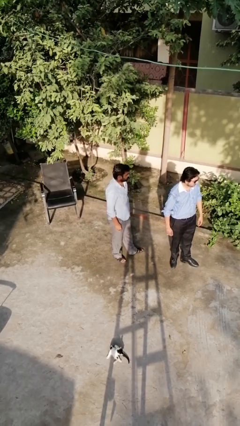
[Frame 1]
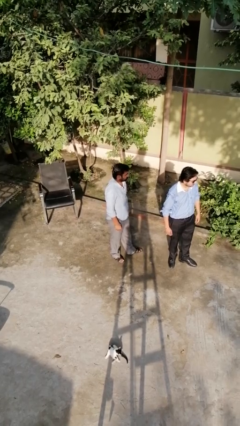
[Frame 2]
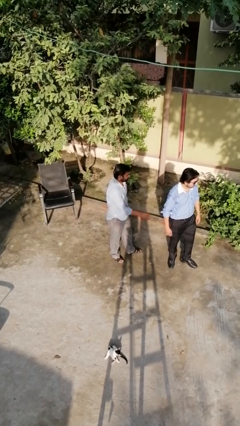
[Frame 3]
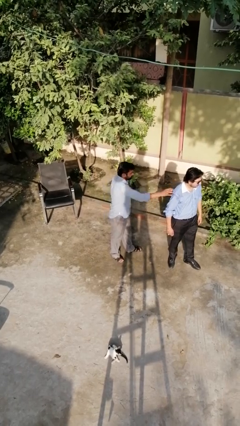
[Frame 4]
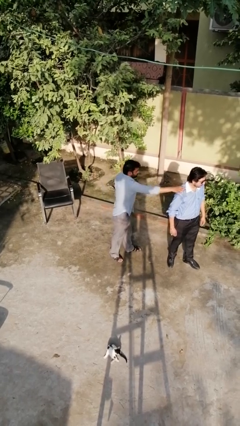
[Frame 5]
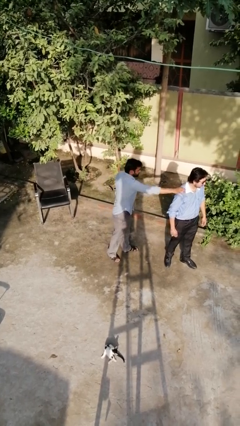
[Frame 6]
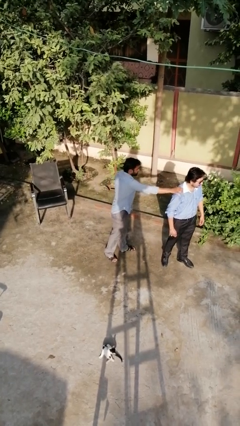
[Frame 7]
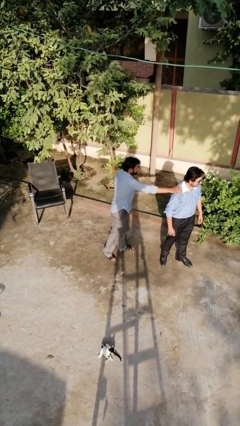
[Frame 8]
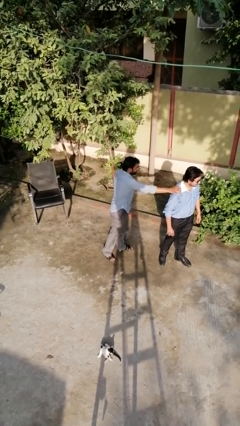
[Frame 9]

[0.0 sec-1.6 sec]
person grabs person by shoulder

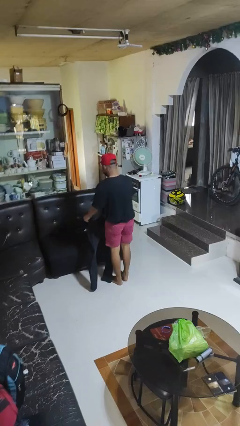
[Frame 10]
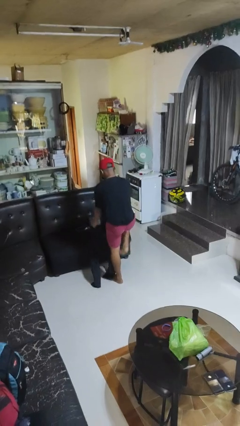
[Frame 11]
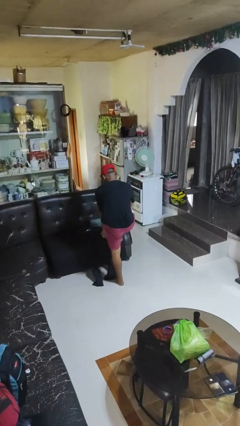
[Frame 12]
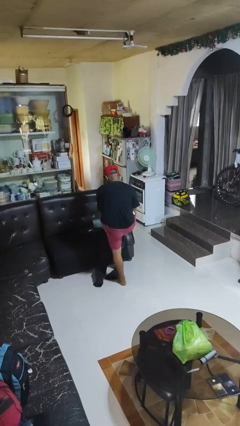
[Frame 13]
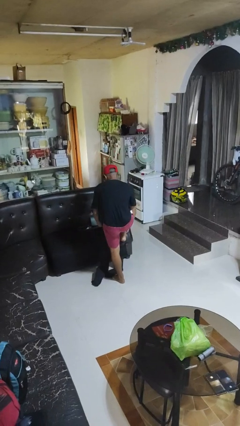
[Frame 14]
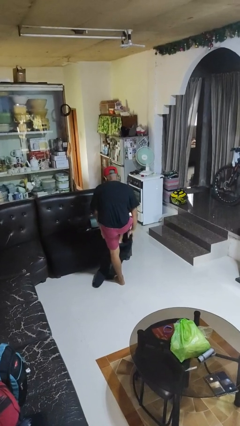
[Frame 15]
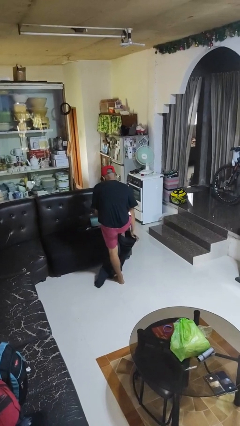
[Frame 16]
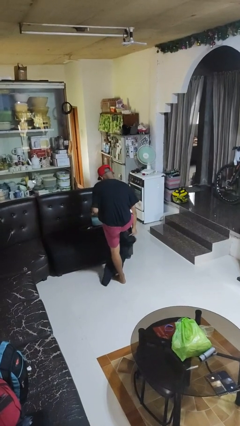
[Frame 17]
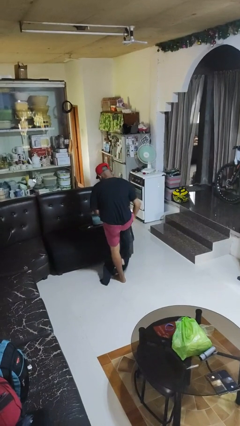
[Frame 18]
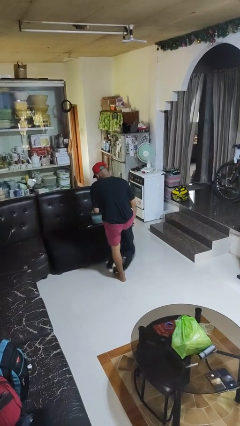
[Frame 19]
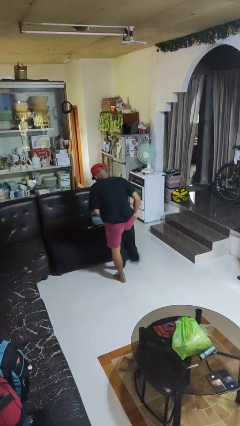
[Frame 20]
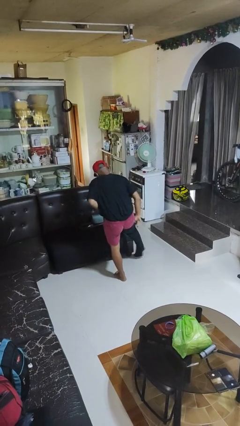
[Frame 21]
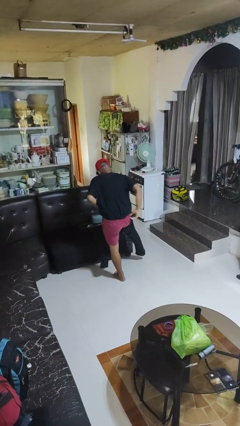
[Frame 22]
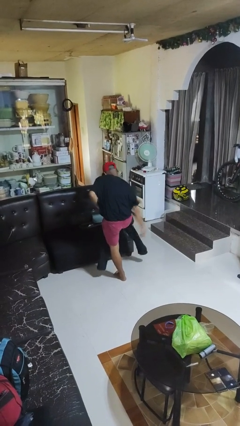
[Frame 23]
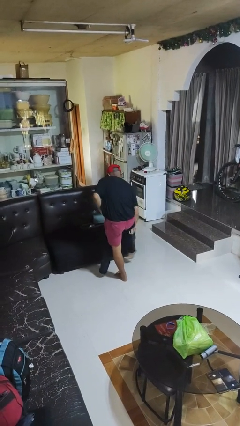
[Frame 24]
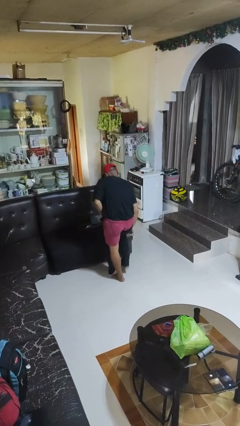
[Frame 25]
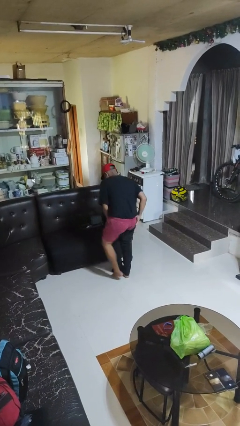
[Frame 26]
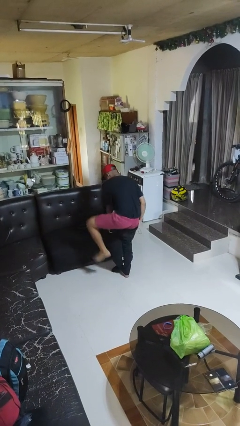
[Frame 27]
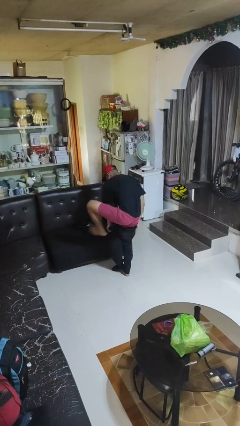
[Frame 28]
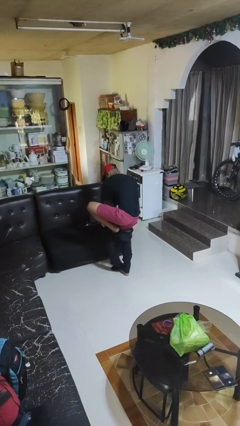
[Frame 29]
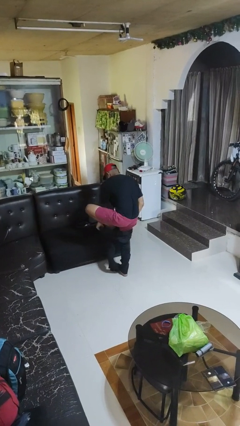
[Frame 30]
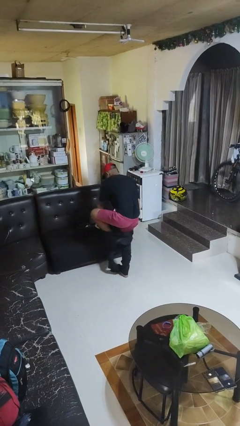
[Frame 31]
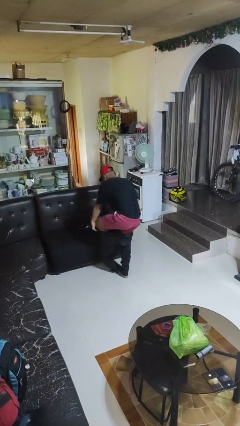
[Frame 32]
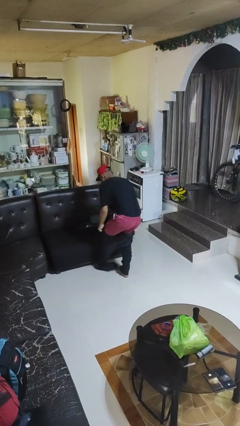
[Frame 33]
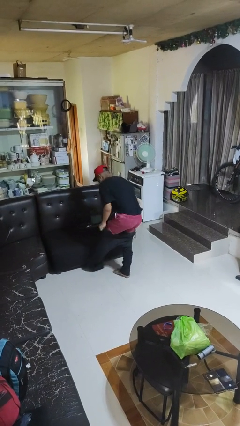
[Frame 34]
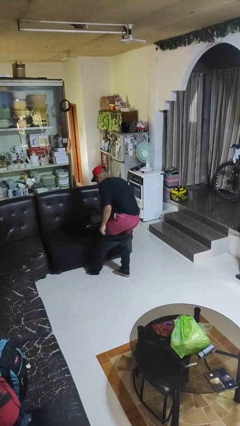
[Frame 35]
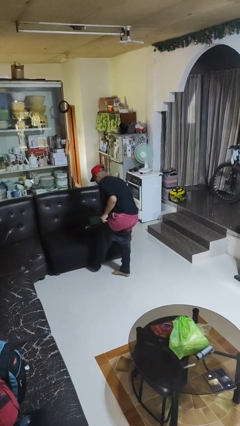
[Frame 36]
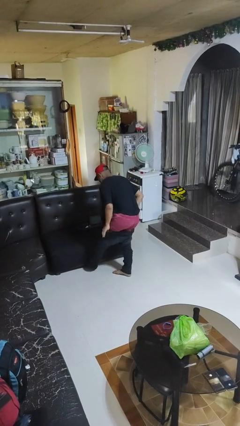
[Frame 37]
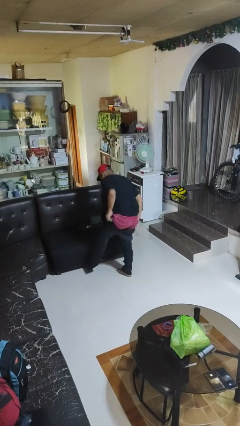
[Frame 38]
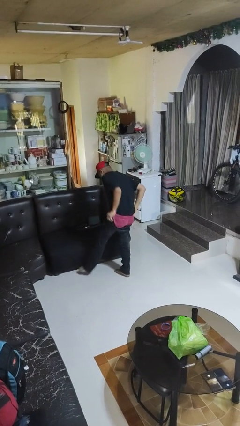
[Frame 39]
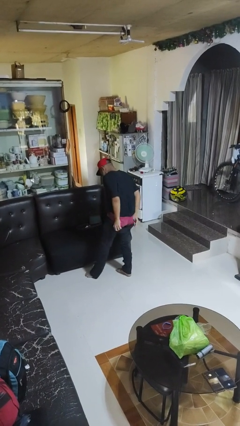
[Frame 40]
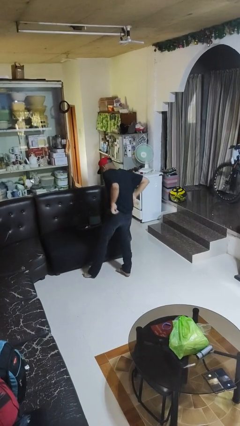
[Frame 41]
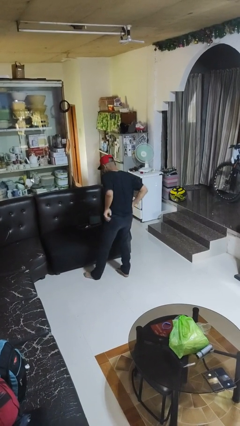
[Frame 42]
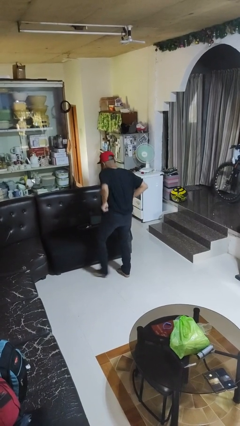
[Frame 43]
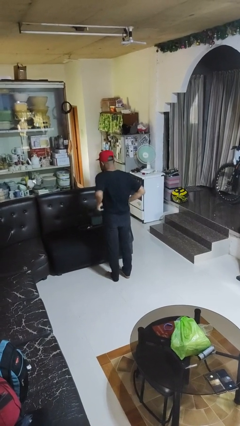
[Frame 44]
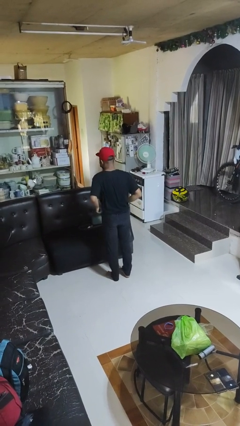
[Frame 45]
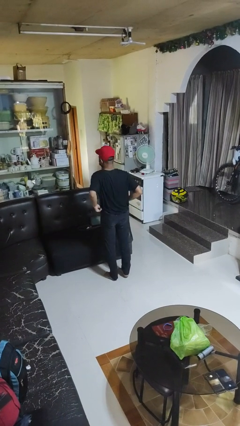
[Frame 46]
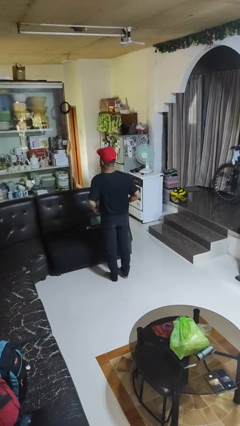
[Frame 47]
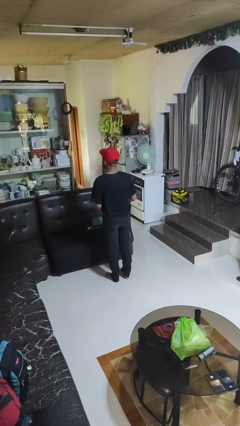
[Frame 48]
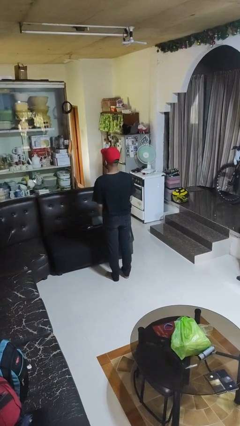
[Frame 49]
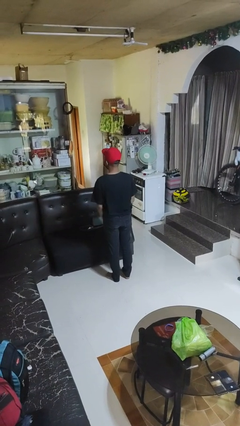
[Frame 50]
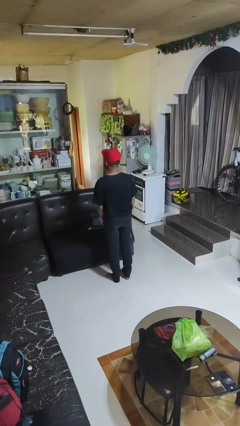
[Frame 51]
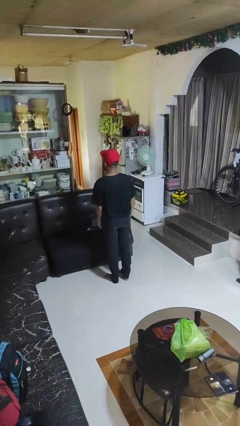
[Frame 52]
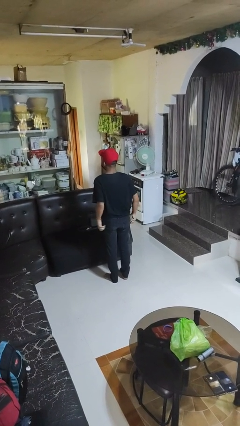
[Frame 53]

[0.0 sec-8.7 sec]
person puts on pants

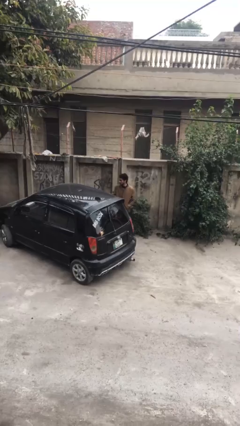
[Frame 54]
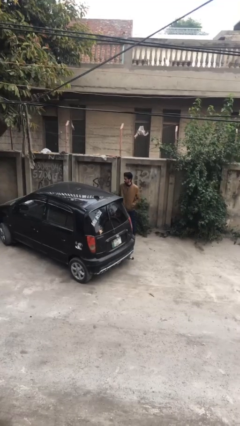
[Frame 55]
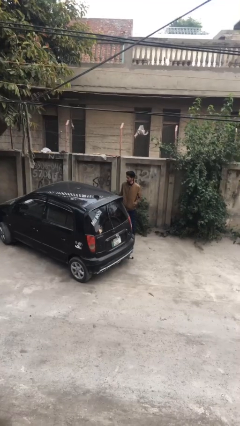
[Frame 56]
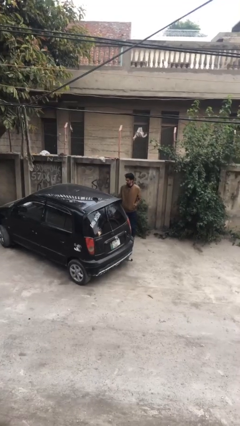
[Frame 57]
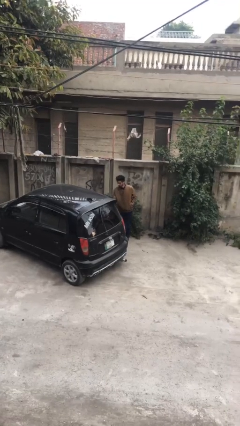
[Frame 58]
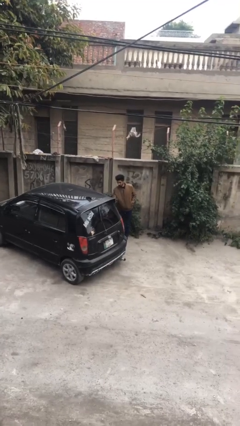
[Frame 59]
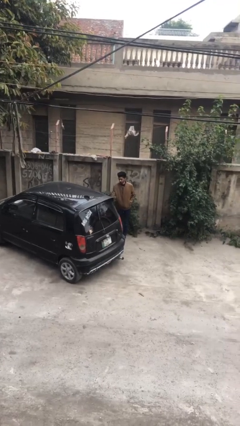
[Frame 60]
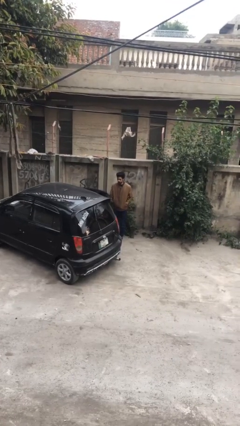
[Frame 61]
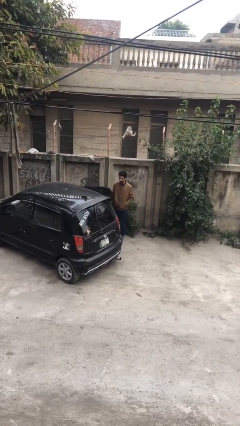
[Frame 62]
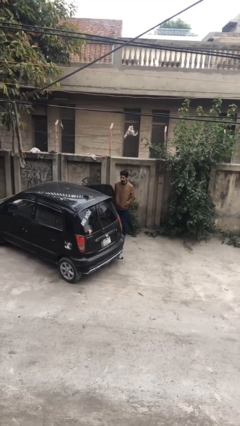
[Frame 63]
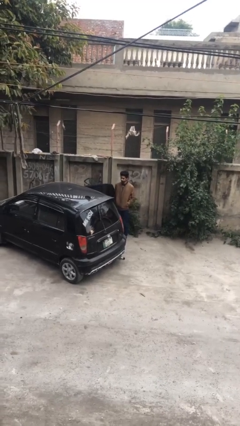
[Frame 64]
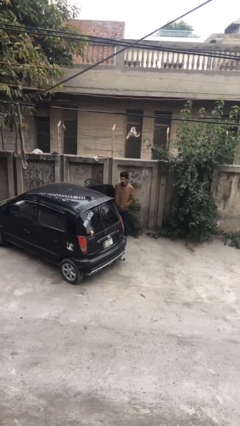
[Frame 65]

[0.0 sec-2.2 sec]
person opens car door

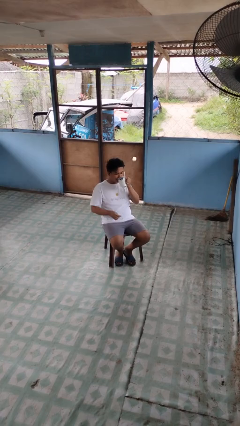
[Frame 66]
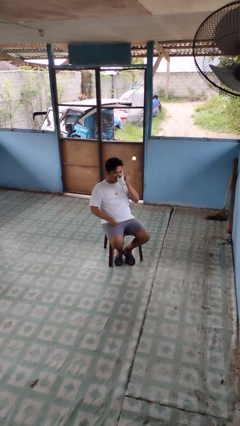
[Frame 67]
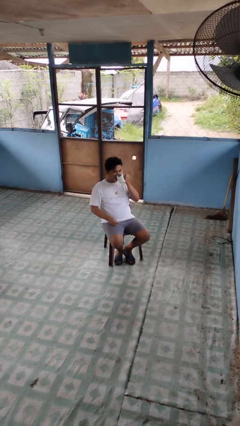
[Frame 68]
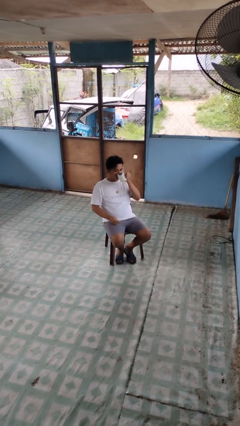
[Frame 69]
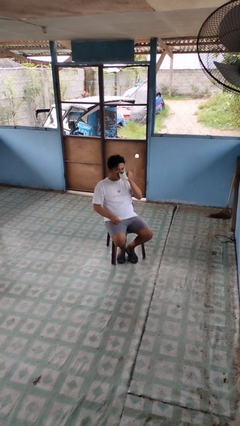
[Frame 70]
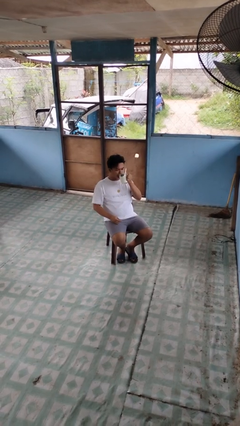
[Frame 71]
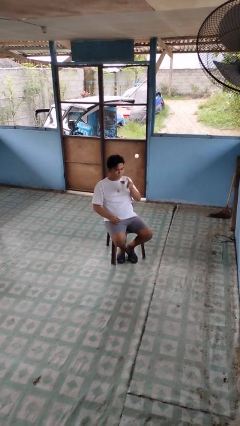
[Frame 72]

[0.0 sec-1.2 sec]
person drinks from mug

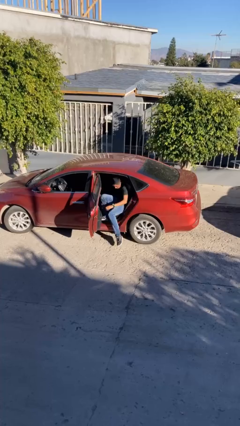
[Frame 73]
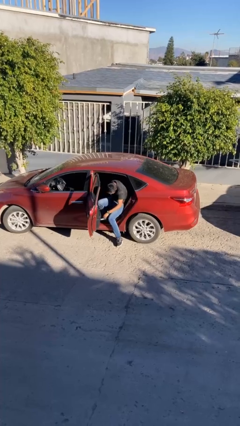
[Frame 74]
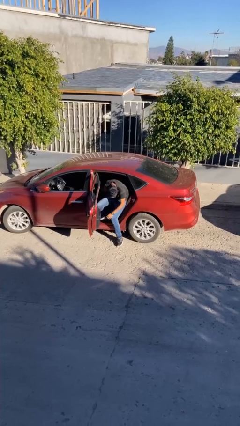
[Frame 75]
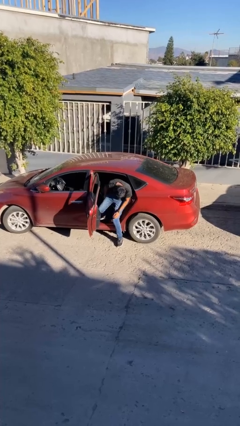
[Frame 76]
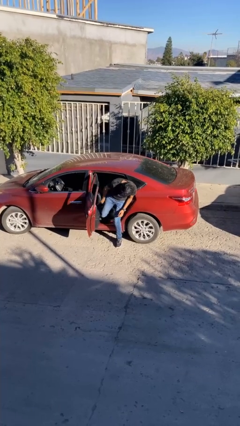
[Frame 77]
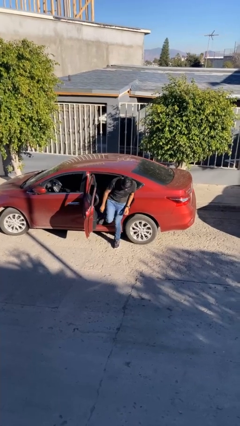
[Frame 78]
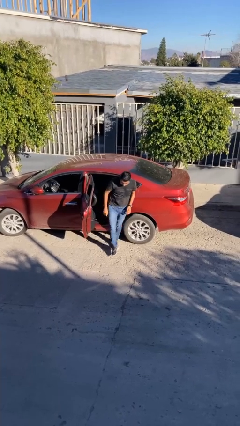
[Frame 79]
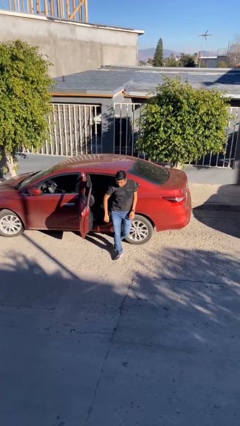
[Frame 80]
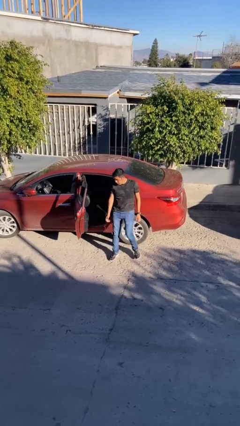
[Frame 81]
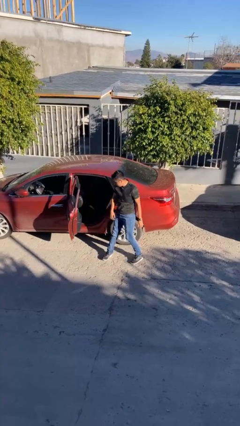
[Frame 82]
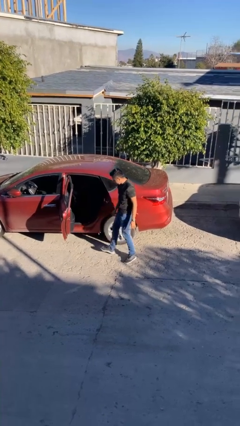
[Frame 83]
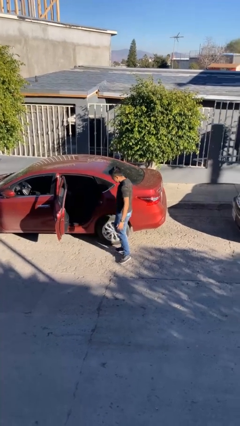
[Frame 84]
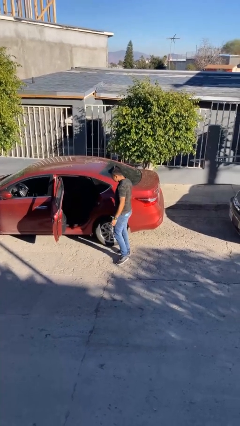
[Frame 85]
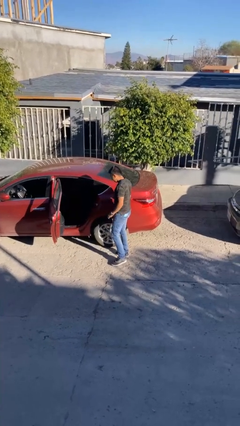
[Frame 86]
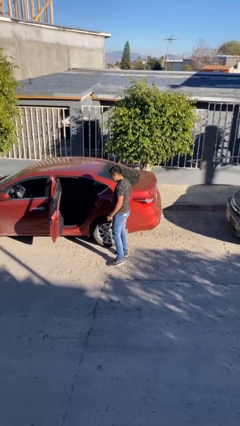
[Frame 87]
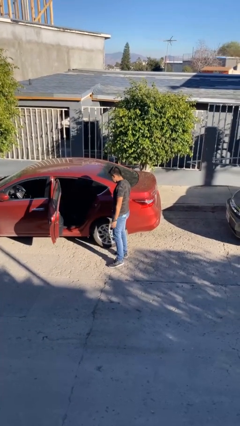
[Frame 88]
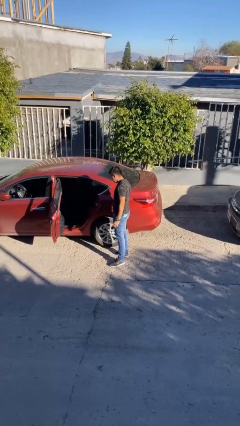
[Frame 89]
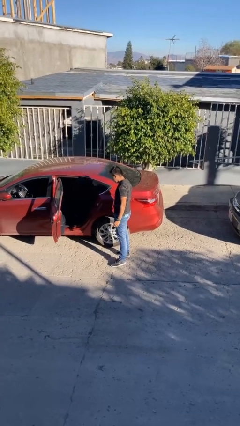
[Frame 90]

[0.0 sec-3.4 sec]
person exits car

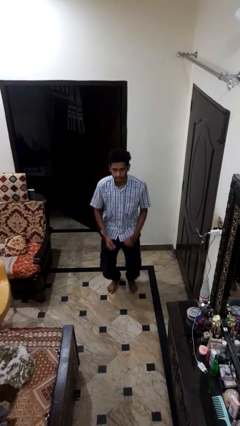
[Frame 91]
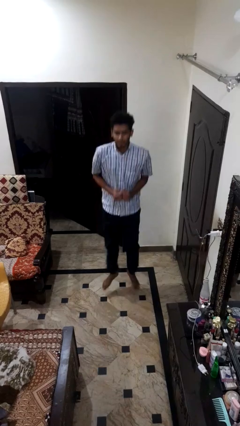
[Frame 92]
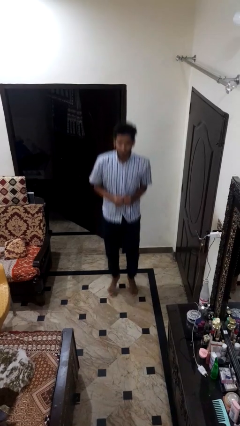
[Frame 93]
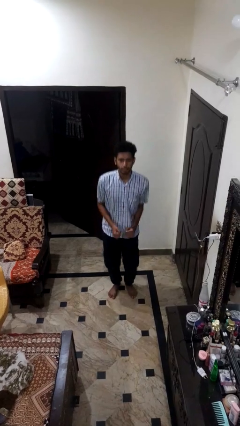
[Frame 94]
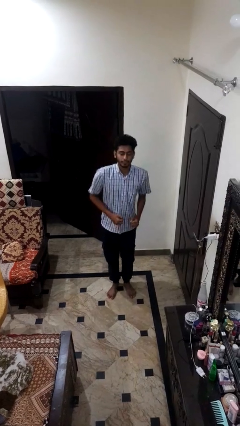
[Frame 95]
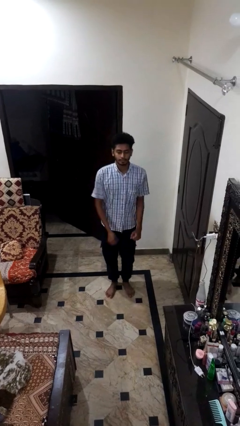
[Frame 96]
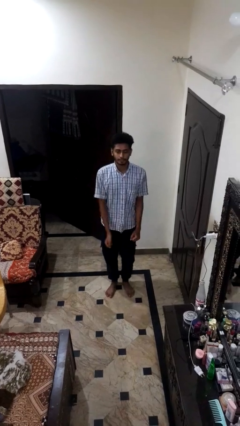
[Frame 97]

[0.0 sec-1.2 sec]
person jumps
